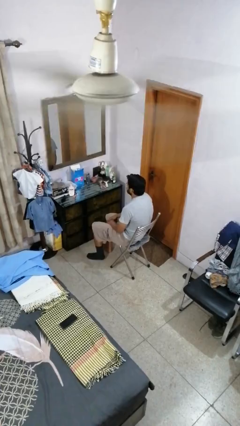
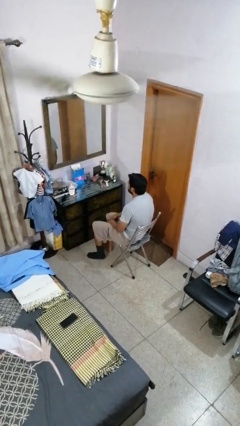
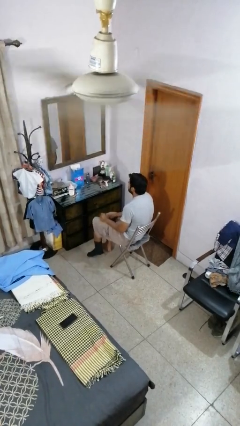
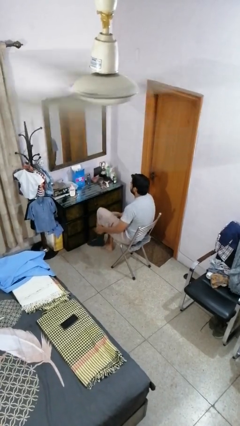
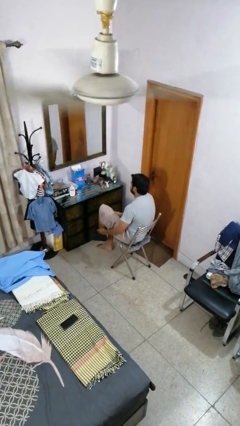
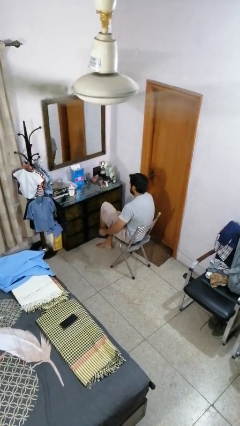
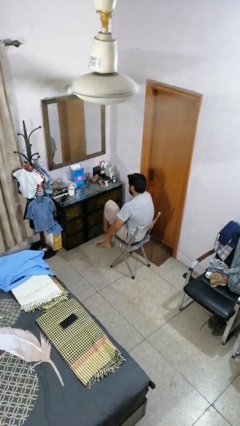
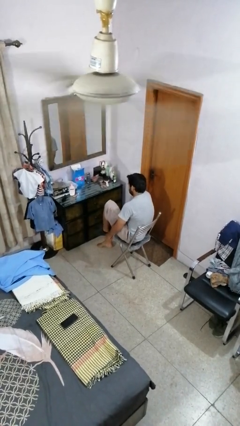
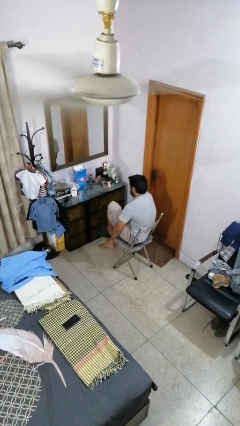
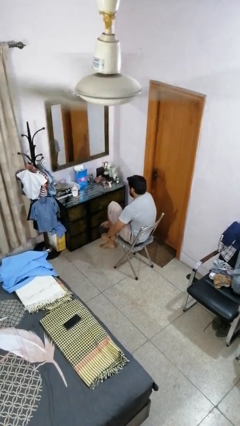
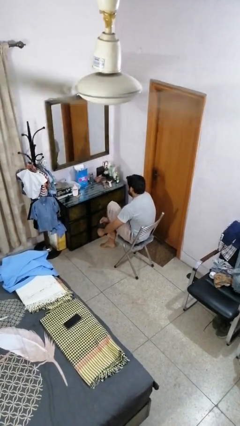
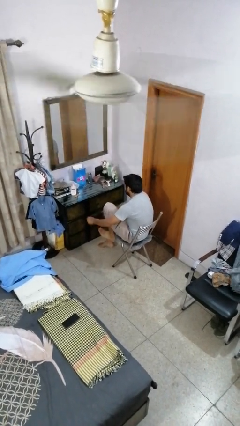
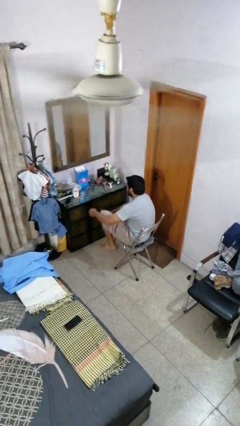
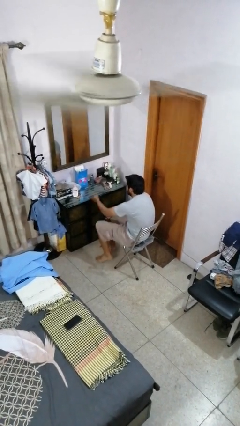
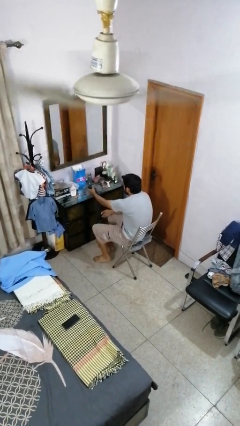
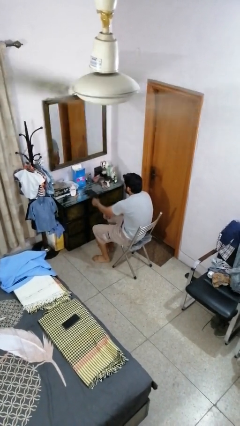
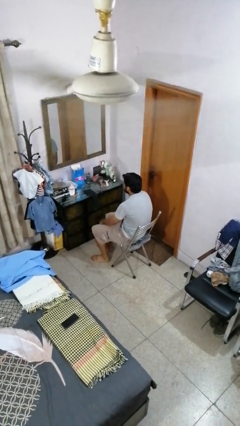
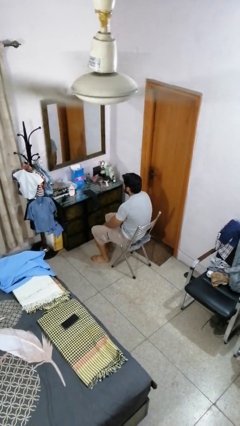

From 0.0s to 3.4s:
person takes off socks

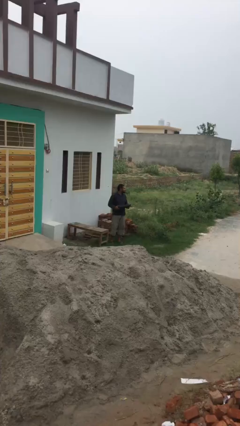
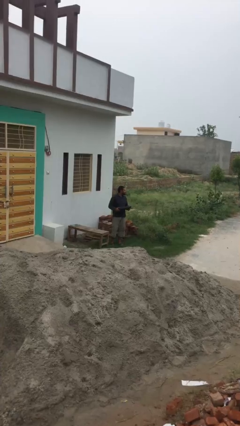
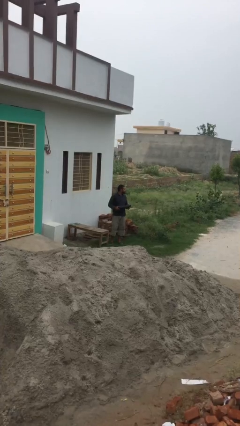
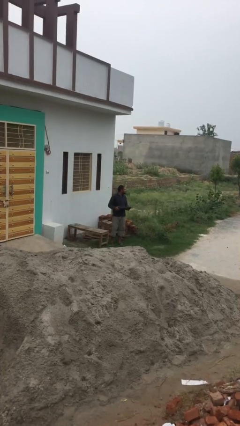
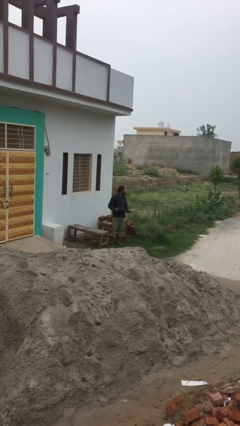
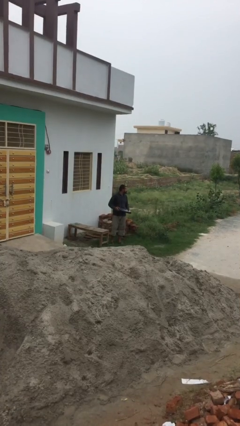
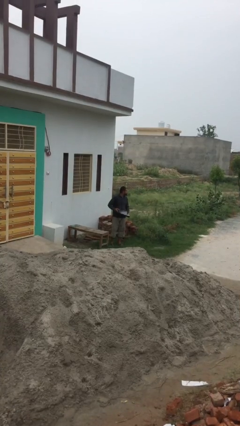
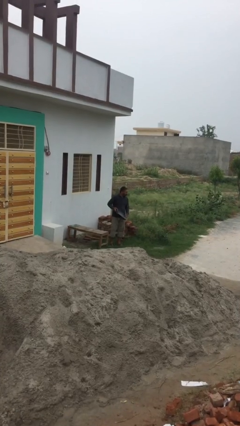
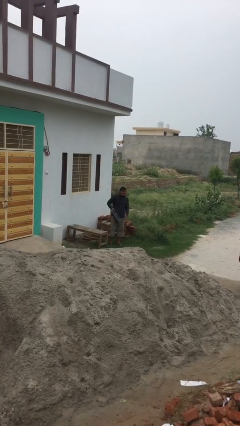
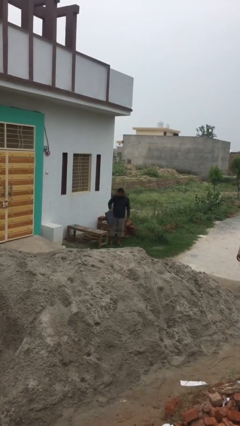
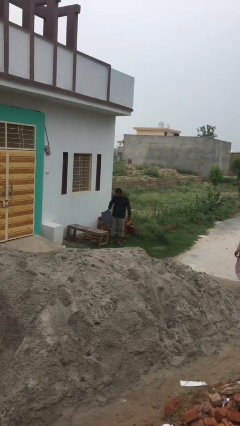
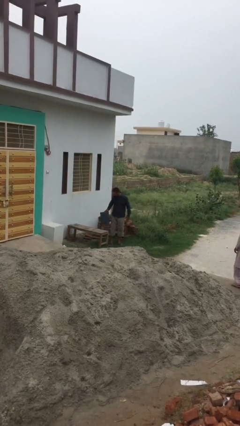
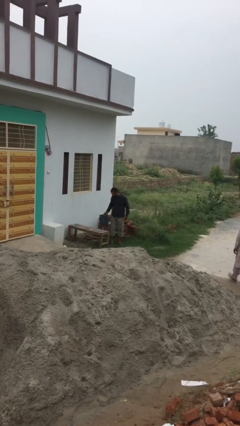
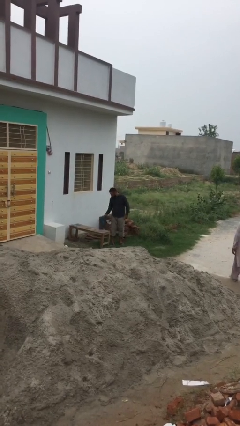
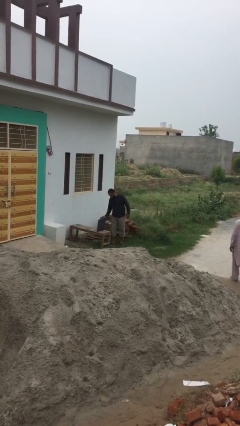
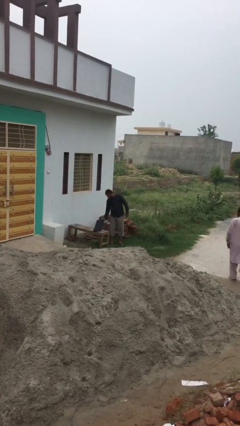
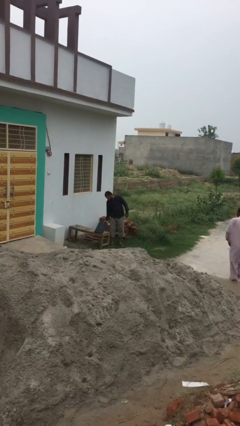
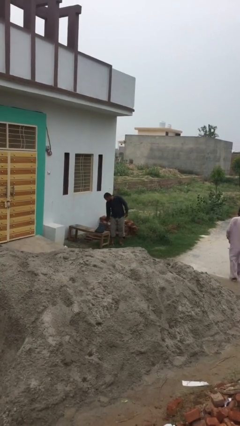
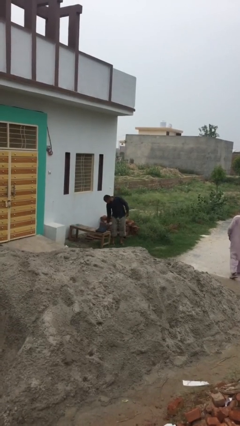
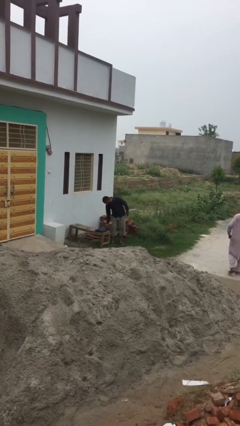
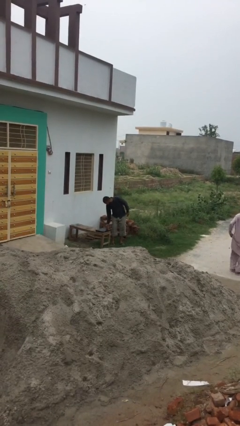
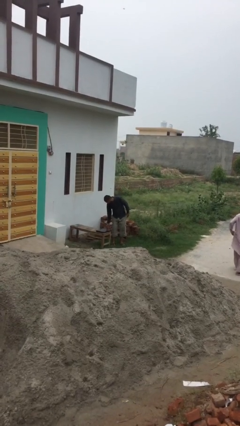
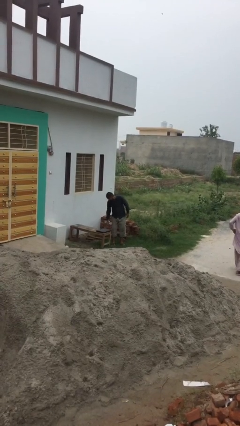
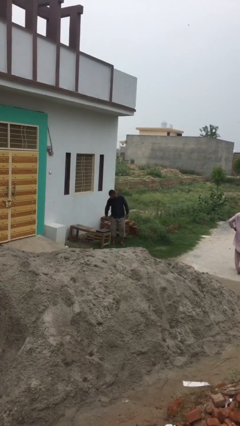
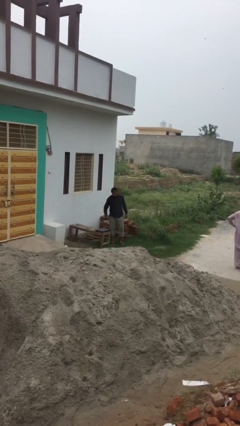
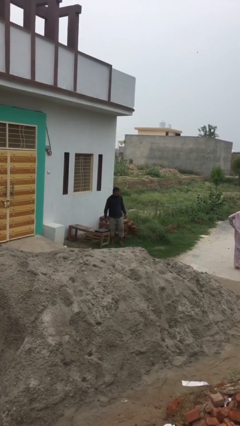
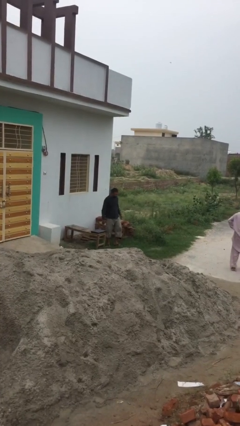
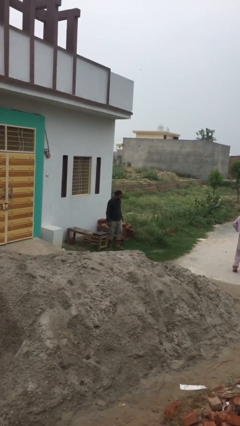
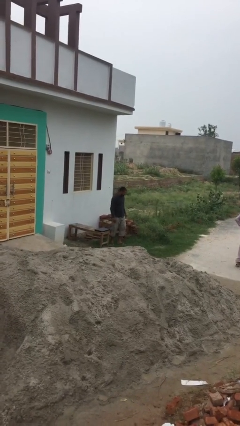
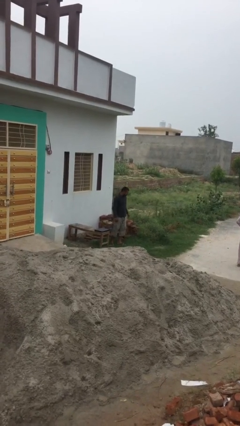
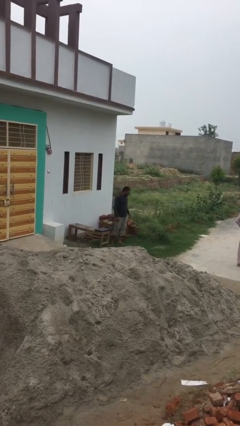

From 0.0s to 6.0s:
person puts down object on table

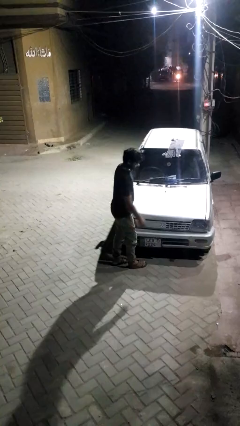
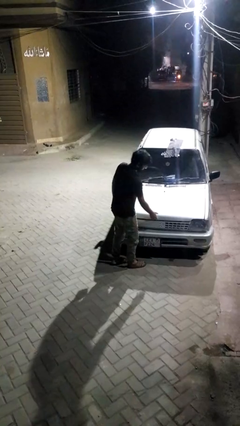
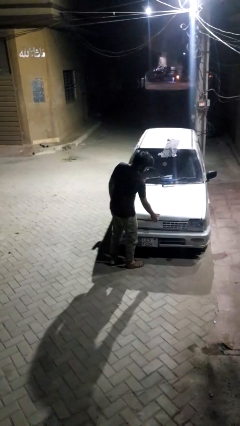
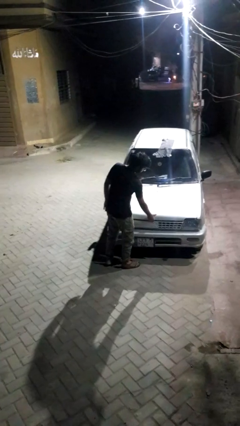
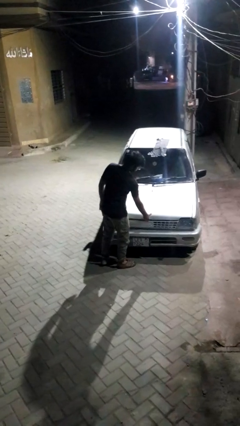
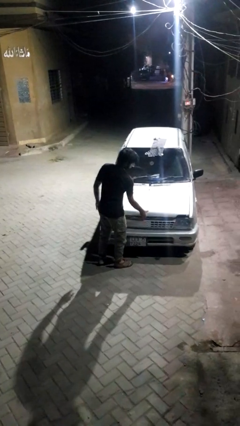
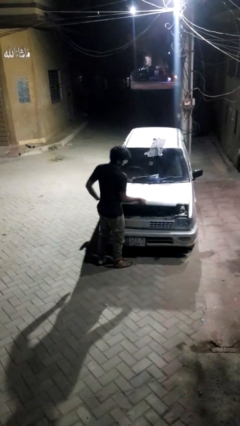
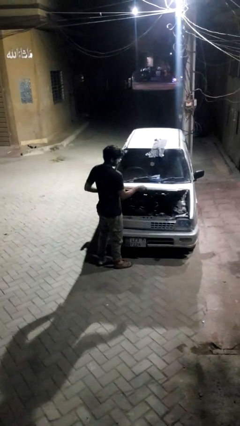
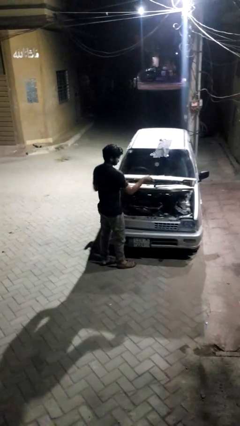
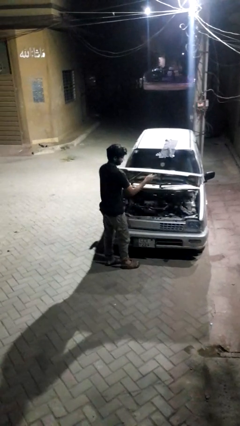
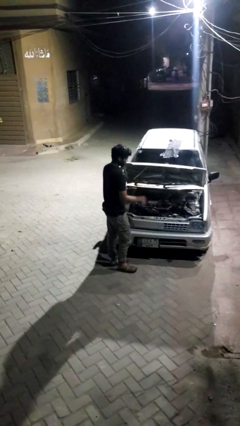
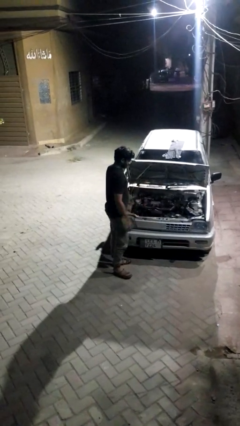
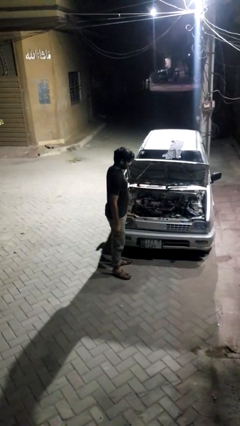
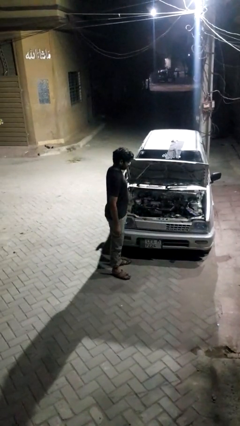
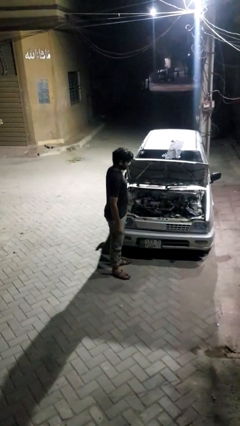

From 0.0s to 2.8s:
person opens car hood

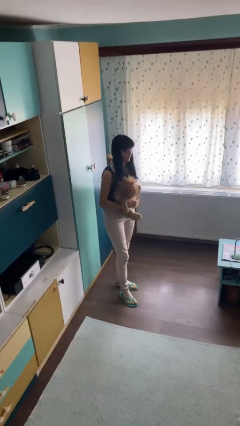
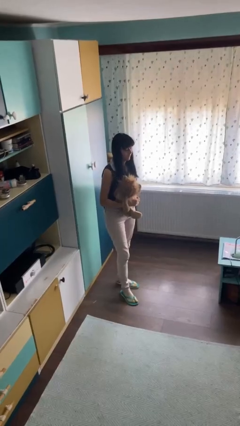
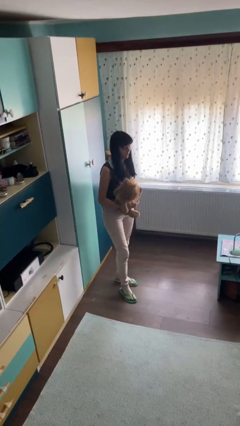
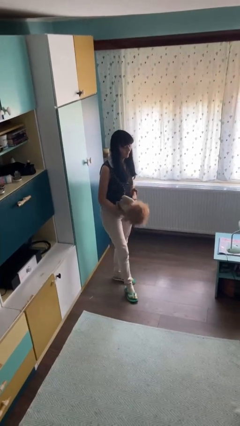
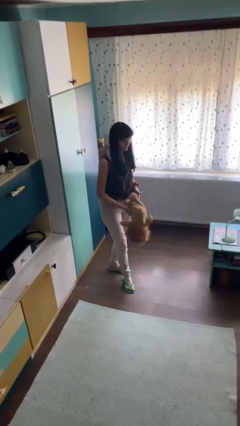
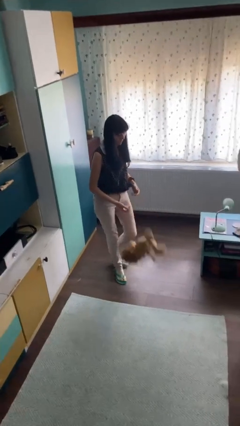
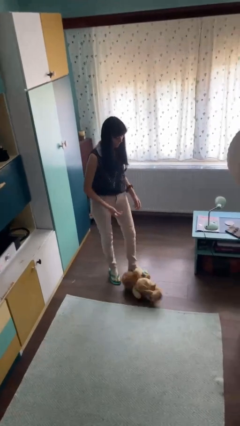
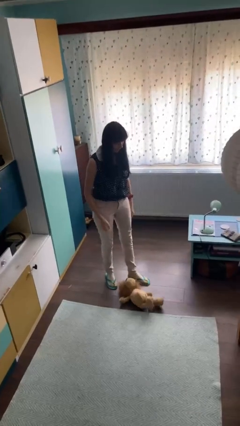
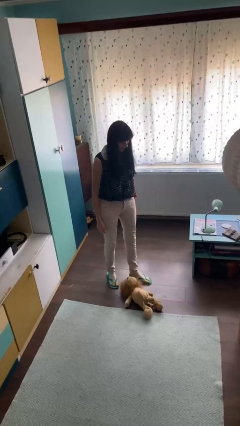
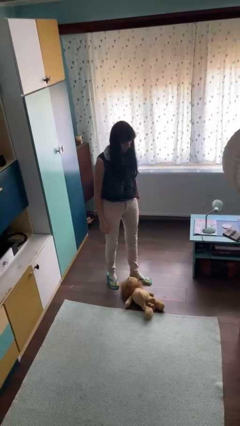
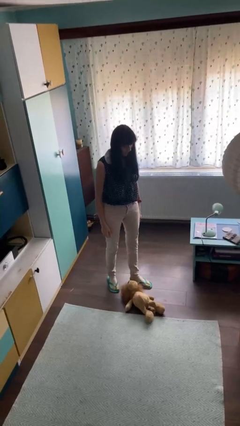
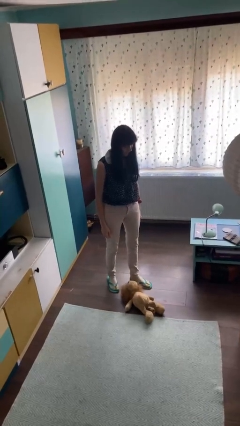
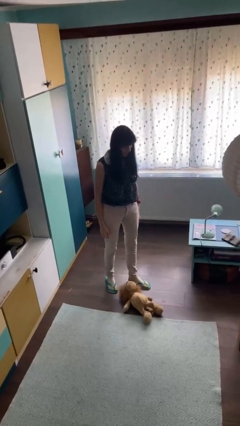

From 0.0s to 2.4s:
person drops object

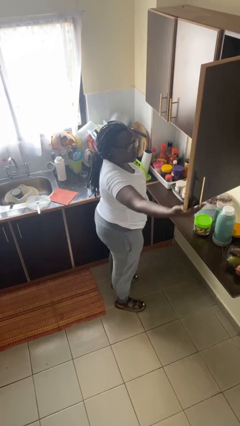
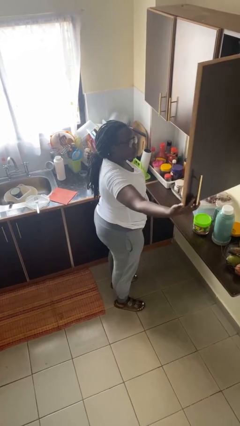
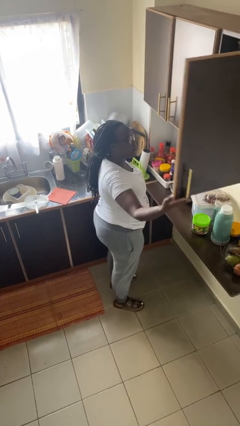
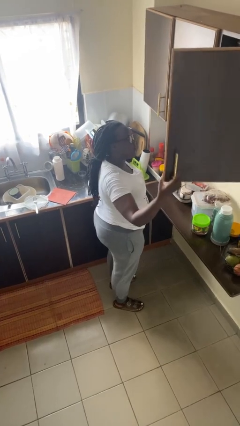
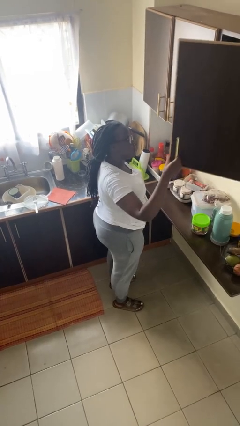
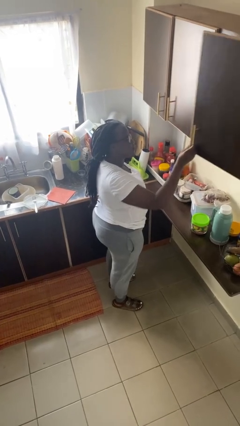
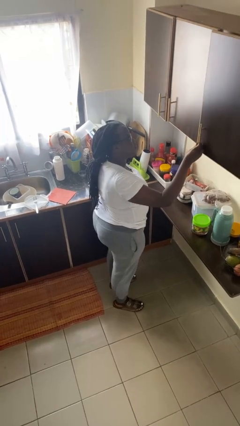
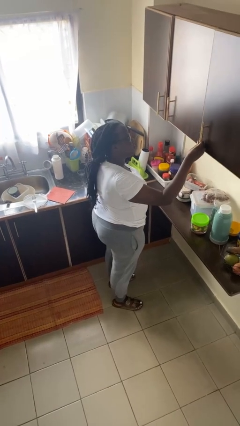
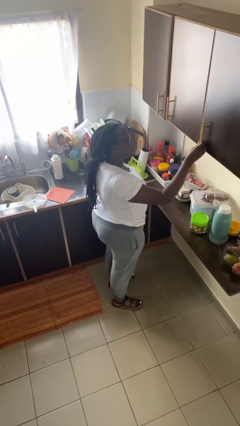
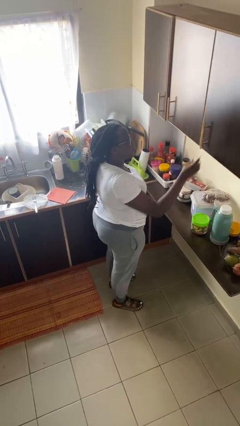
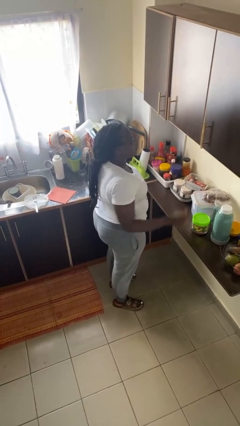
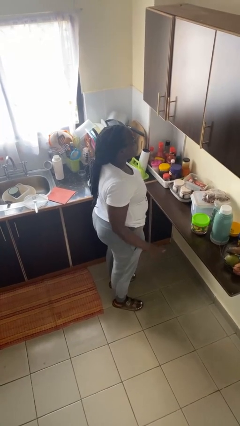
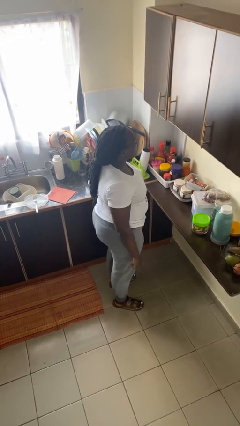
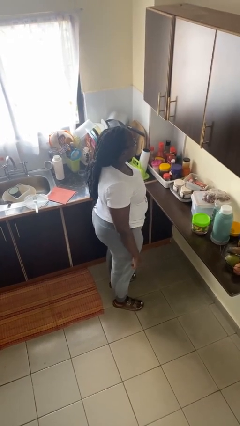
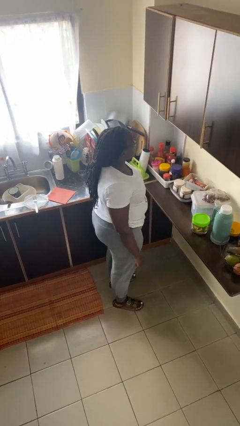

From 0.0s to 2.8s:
person closes cabinet
